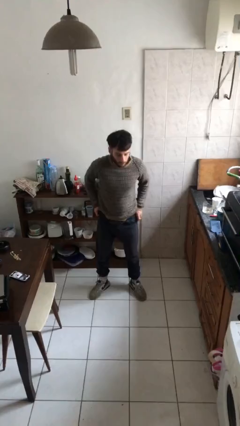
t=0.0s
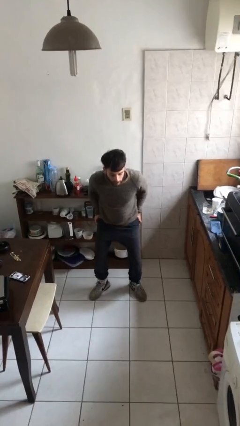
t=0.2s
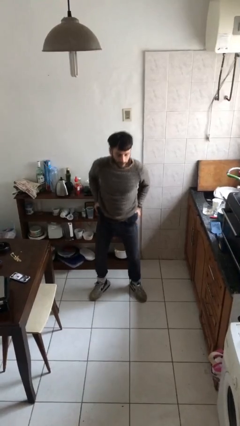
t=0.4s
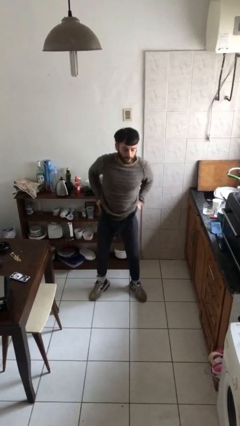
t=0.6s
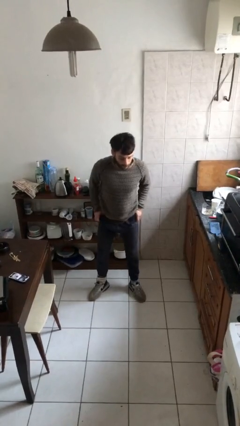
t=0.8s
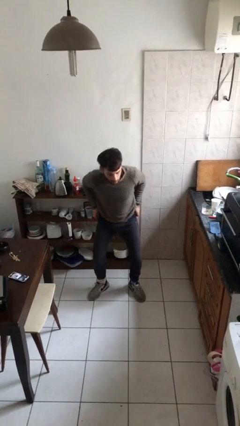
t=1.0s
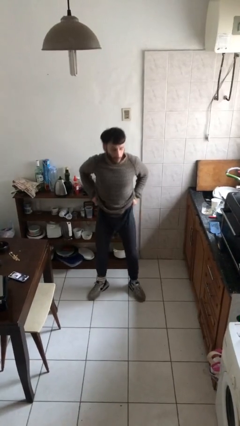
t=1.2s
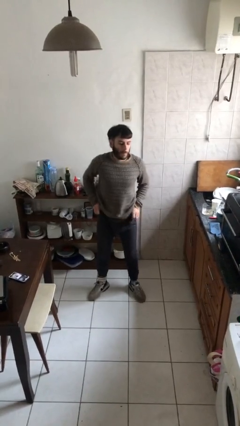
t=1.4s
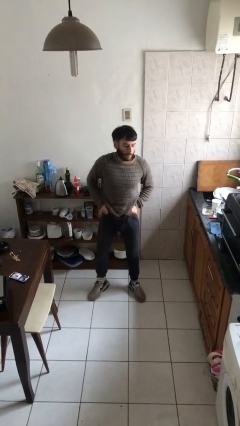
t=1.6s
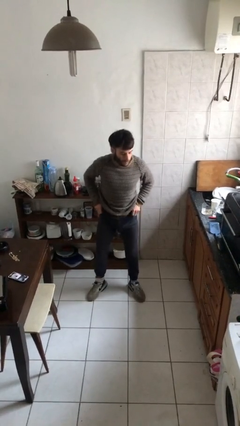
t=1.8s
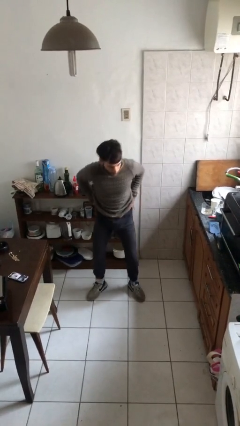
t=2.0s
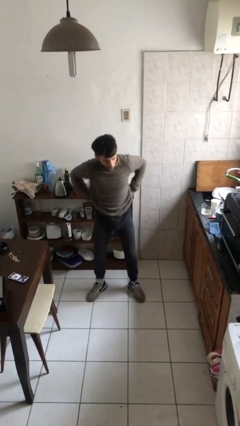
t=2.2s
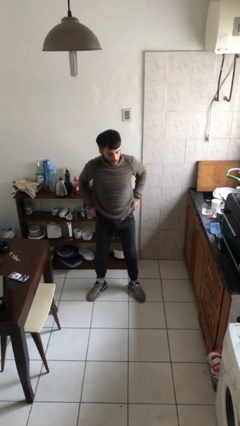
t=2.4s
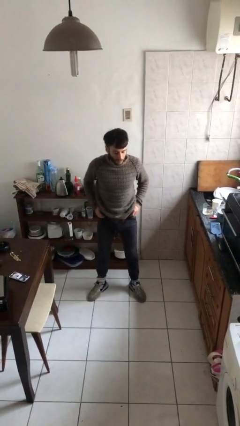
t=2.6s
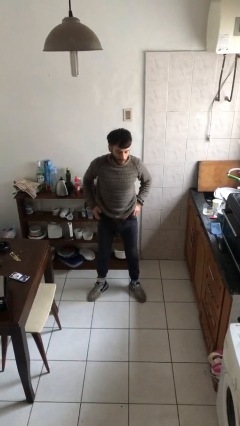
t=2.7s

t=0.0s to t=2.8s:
person hikes up pants

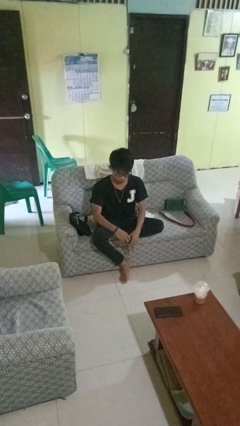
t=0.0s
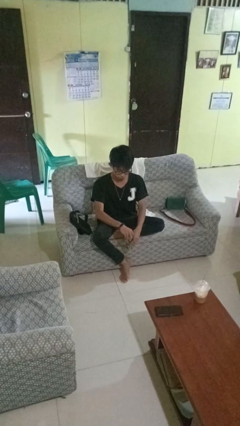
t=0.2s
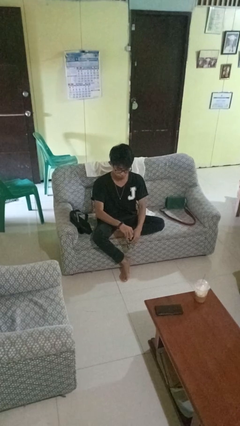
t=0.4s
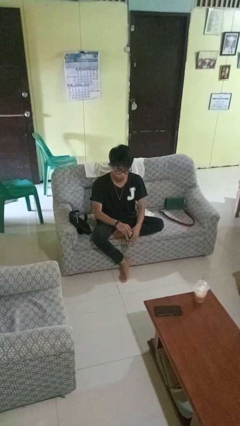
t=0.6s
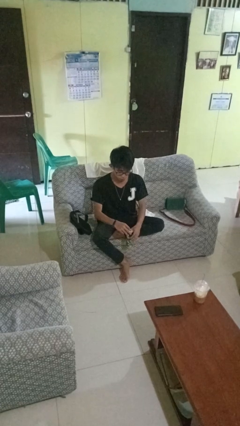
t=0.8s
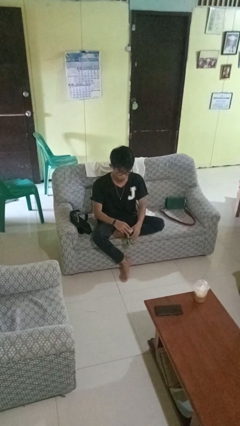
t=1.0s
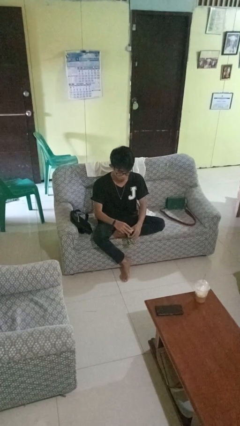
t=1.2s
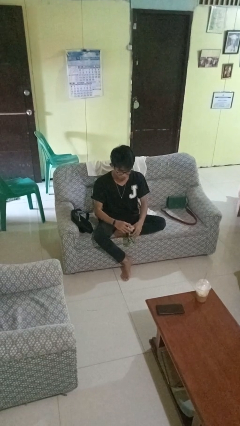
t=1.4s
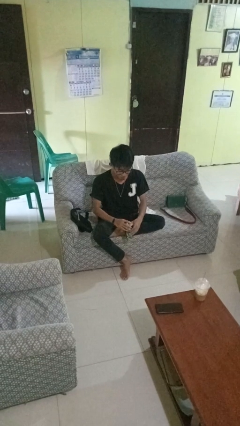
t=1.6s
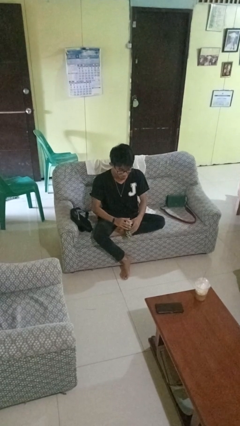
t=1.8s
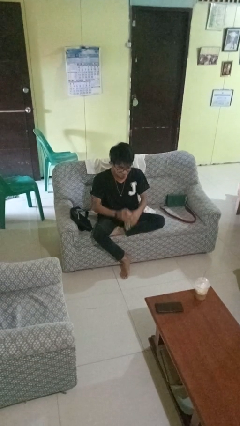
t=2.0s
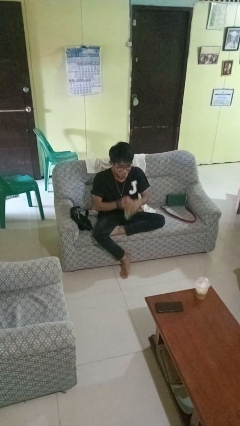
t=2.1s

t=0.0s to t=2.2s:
person opens beverage can

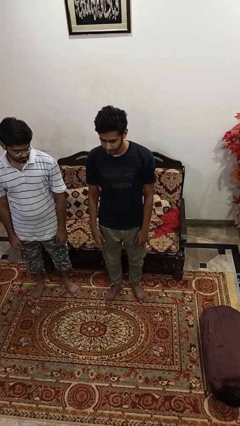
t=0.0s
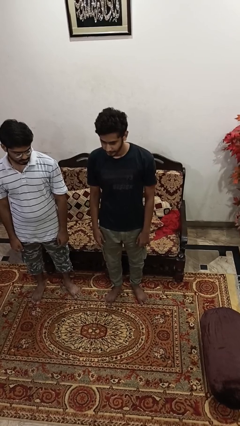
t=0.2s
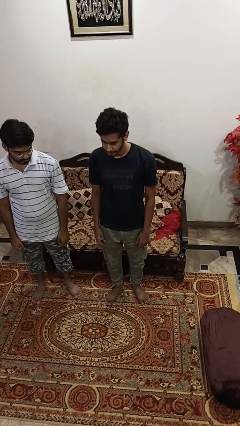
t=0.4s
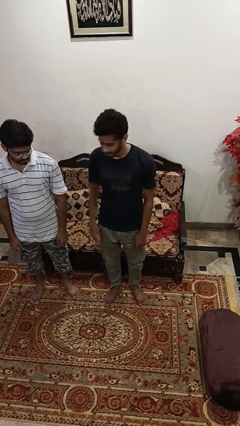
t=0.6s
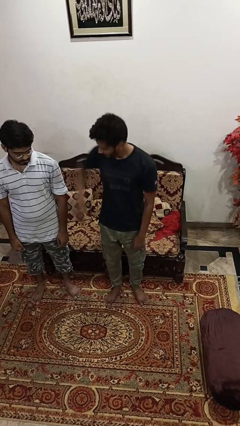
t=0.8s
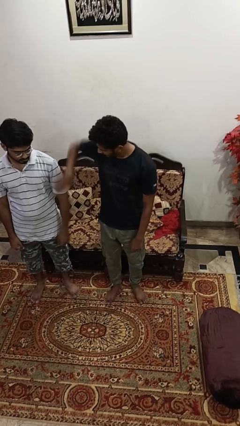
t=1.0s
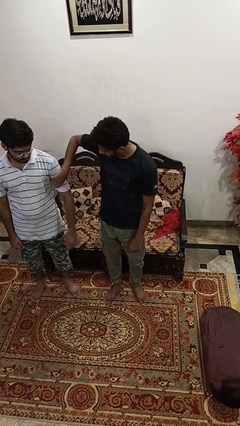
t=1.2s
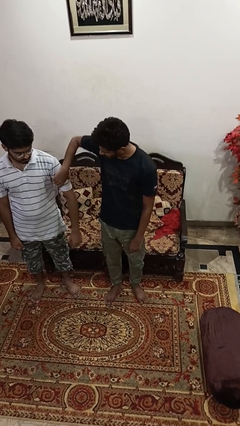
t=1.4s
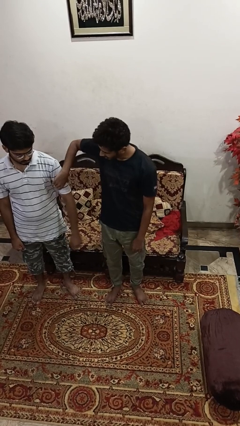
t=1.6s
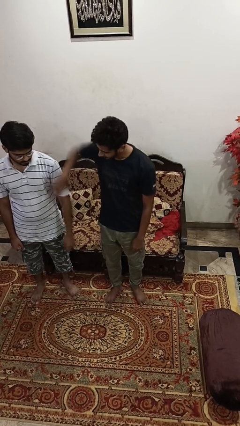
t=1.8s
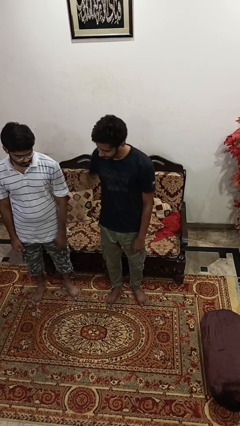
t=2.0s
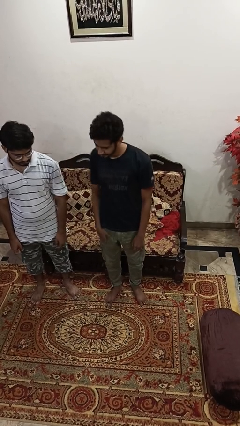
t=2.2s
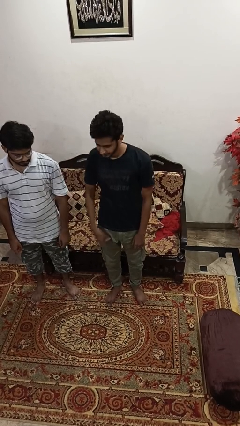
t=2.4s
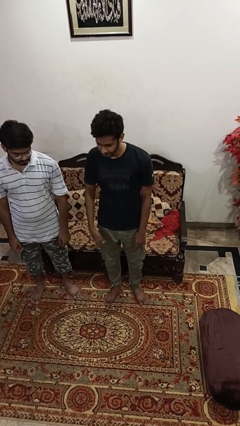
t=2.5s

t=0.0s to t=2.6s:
person grabs person by bicep

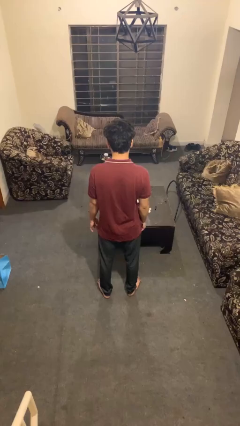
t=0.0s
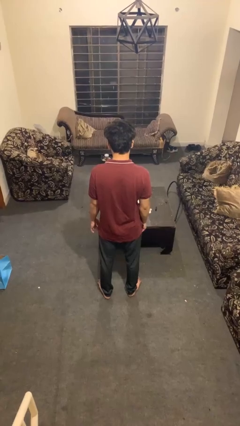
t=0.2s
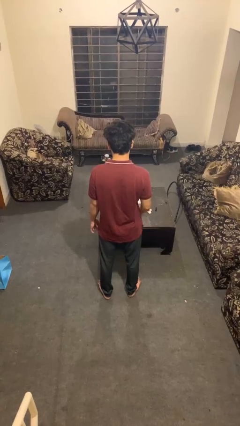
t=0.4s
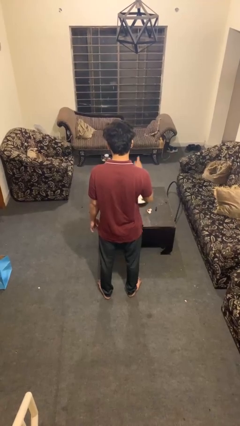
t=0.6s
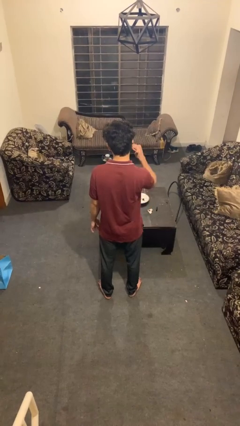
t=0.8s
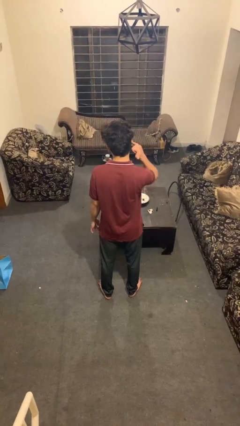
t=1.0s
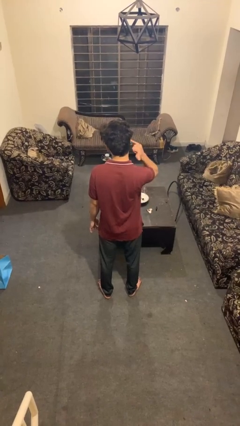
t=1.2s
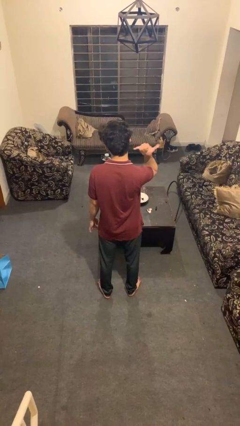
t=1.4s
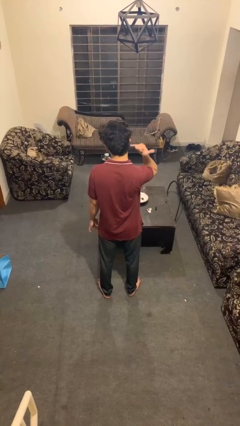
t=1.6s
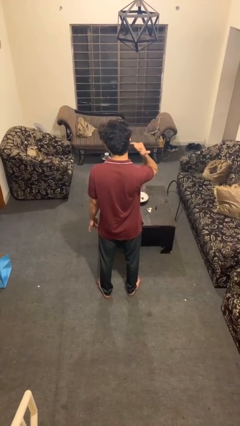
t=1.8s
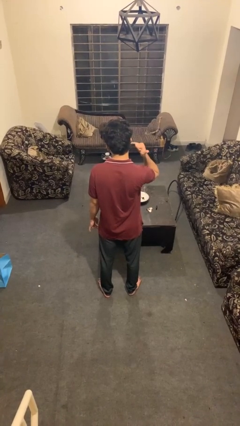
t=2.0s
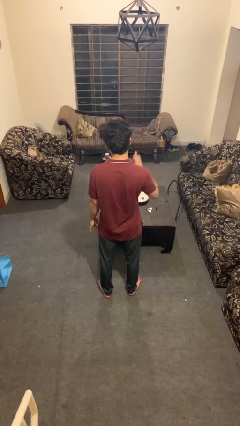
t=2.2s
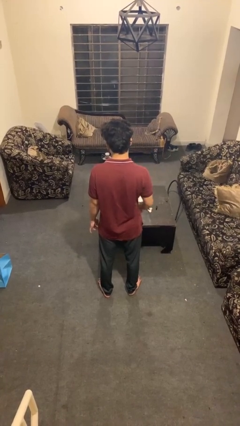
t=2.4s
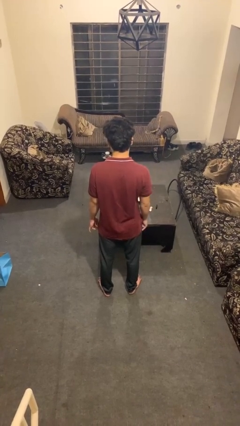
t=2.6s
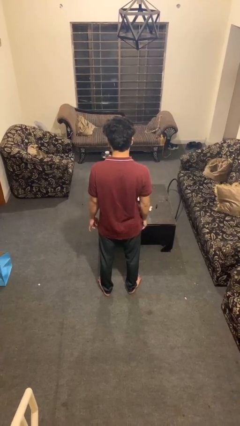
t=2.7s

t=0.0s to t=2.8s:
person gestures hang loose

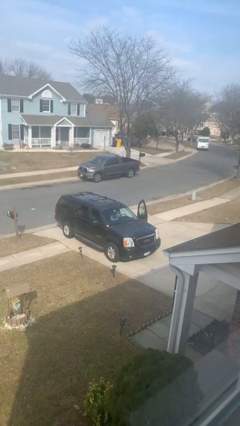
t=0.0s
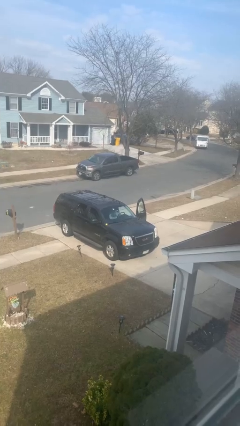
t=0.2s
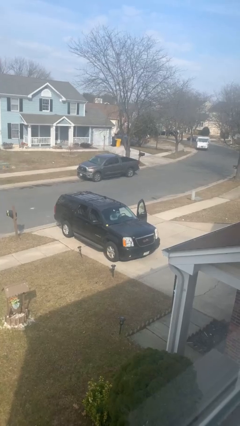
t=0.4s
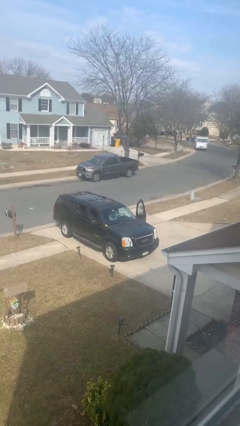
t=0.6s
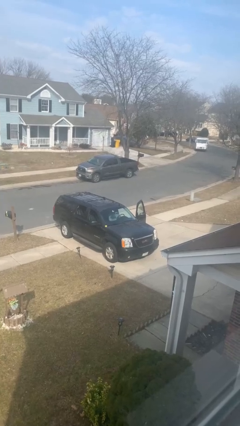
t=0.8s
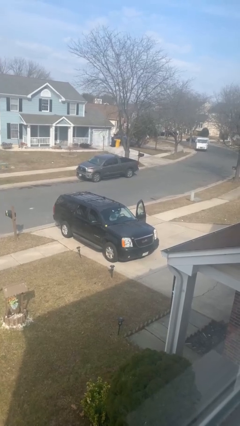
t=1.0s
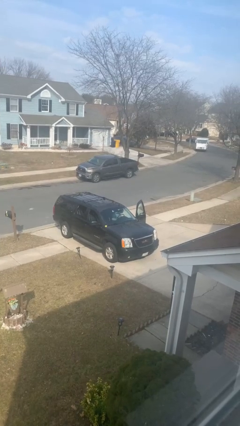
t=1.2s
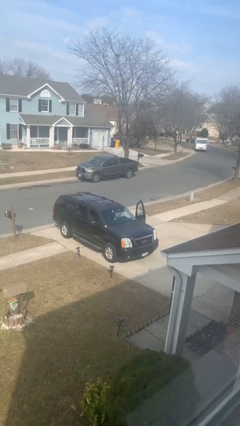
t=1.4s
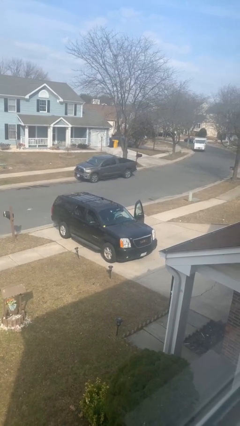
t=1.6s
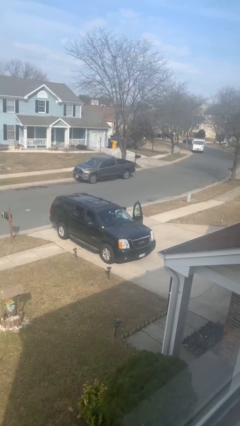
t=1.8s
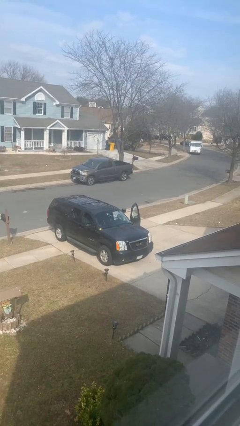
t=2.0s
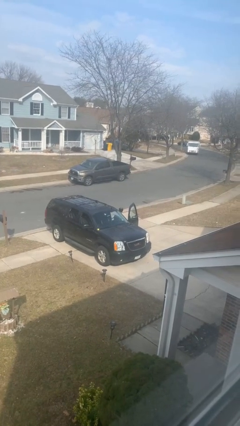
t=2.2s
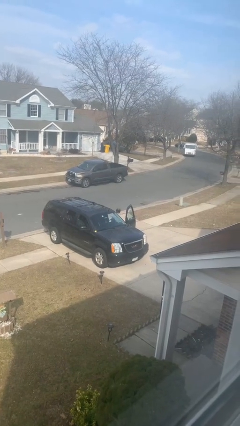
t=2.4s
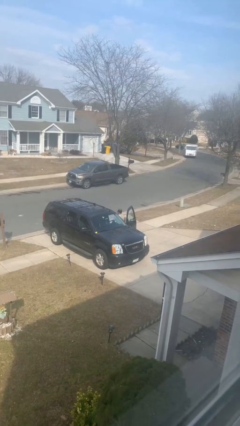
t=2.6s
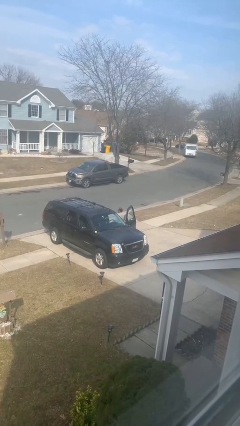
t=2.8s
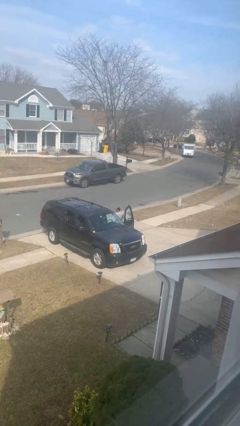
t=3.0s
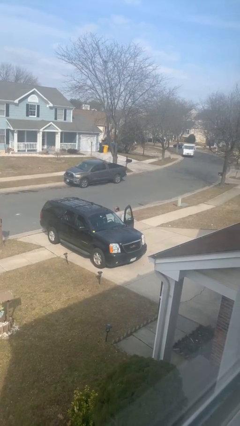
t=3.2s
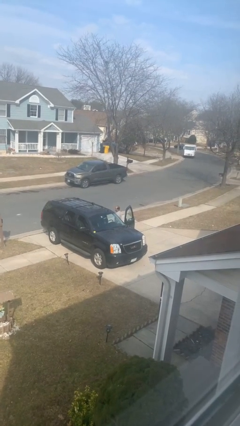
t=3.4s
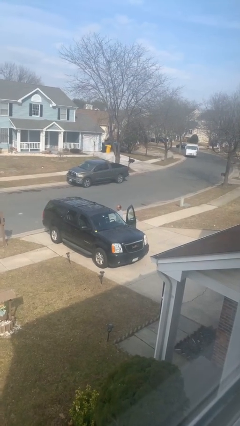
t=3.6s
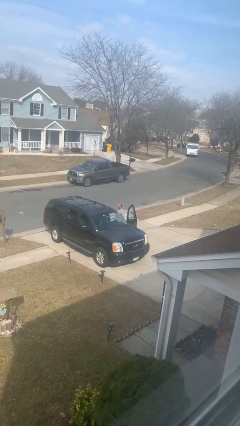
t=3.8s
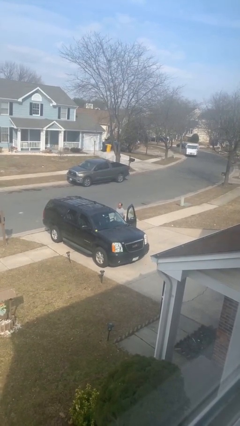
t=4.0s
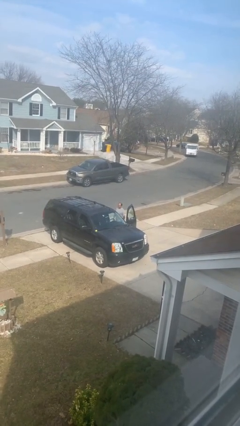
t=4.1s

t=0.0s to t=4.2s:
person exits car

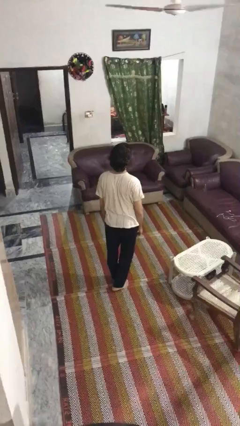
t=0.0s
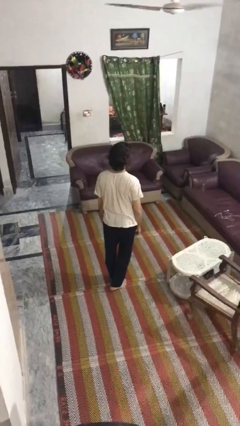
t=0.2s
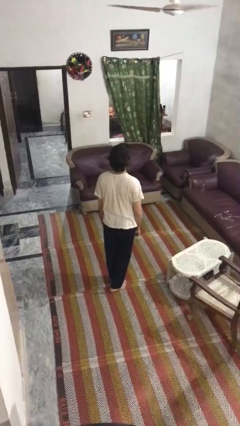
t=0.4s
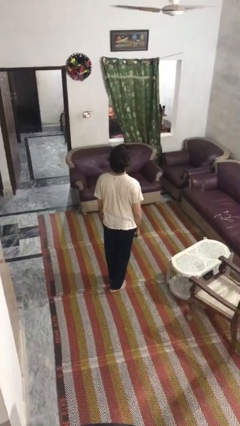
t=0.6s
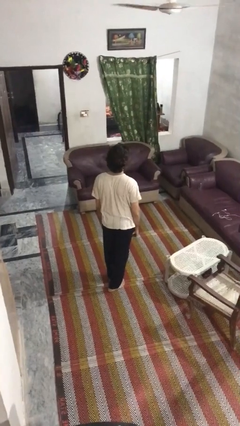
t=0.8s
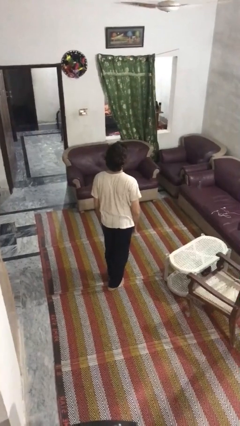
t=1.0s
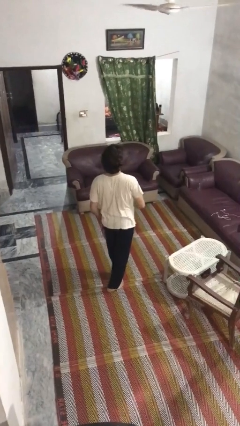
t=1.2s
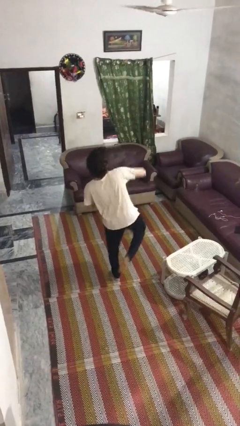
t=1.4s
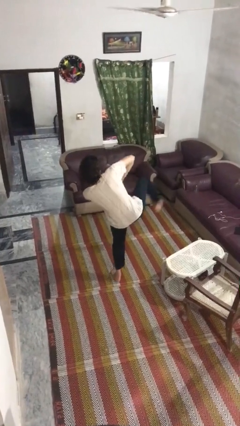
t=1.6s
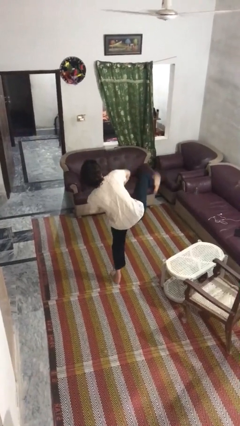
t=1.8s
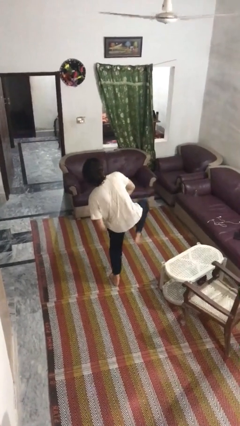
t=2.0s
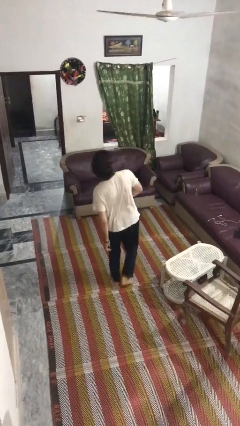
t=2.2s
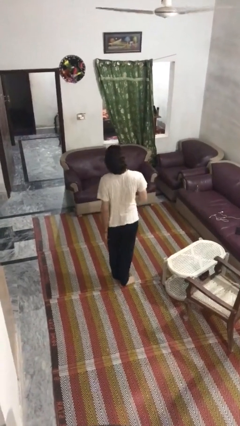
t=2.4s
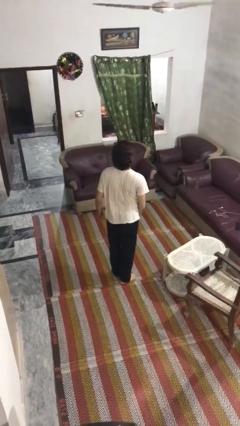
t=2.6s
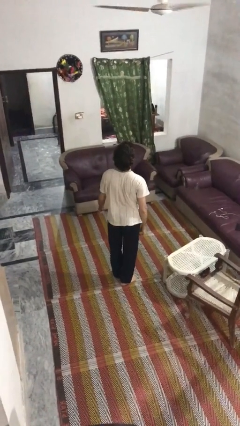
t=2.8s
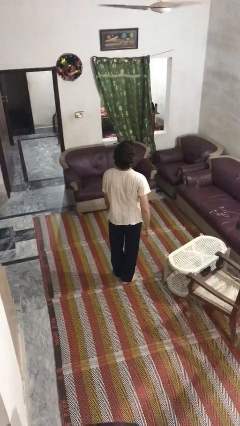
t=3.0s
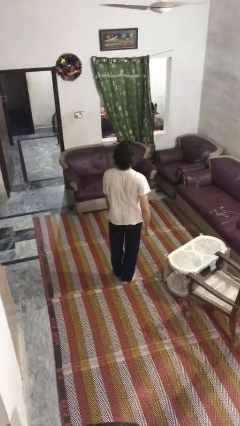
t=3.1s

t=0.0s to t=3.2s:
person karate kicks
